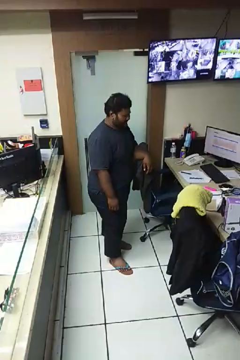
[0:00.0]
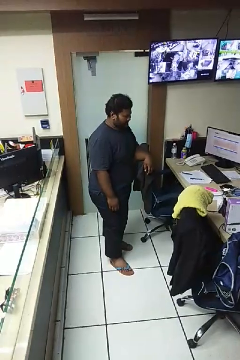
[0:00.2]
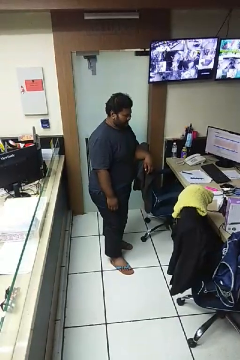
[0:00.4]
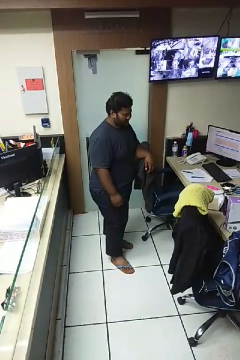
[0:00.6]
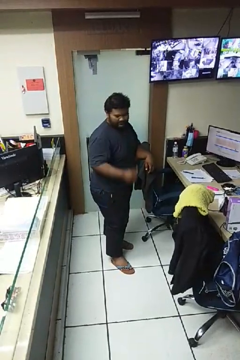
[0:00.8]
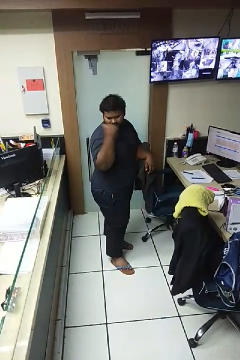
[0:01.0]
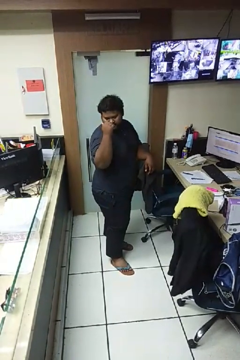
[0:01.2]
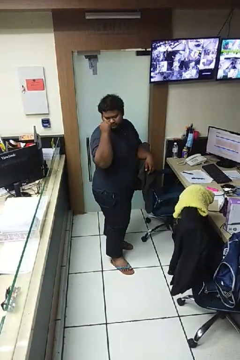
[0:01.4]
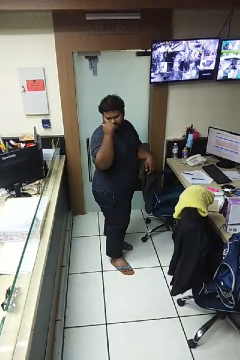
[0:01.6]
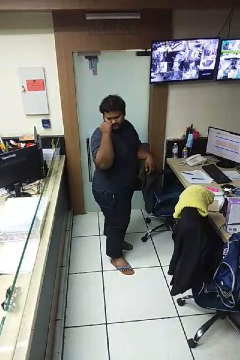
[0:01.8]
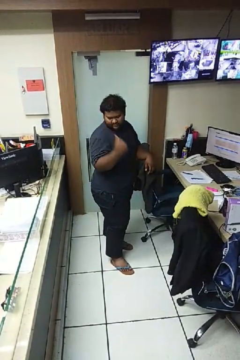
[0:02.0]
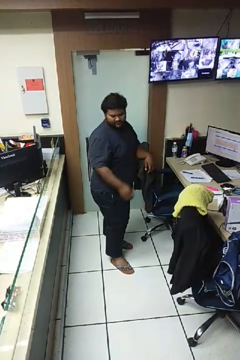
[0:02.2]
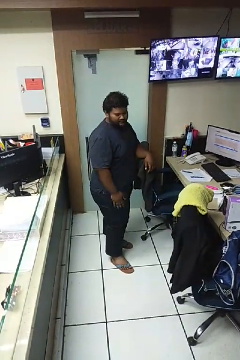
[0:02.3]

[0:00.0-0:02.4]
person gestures behind me

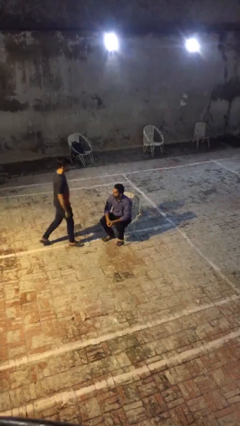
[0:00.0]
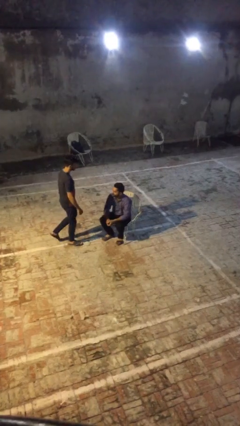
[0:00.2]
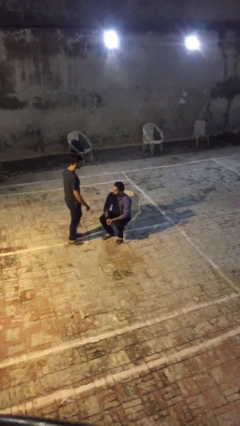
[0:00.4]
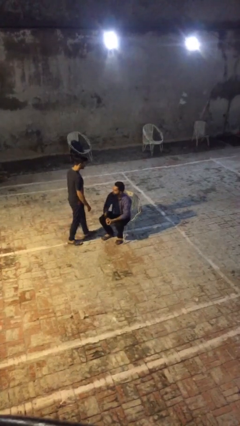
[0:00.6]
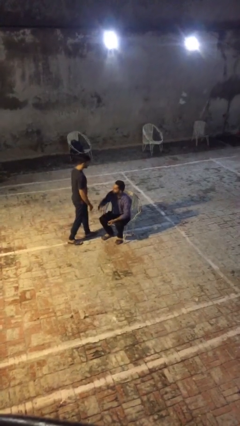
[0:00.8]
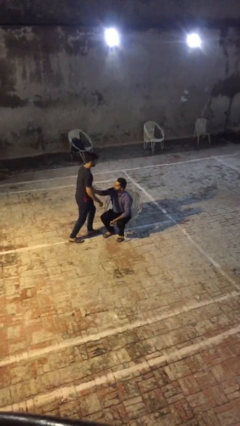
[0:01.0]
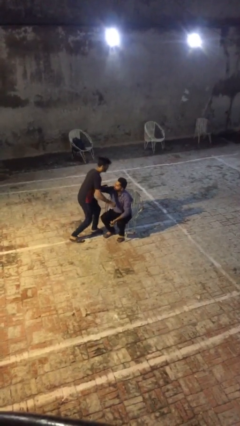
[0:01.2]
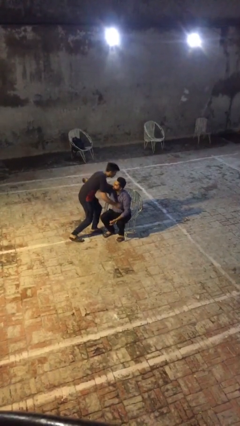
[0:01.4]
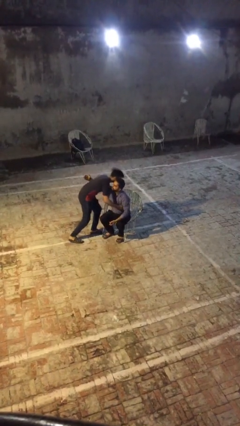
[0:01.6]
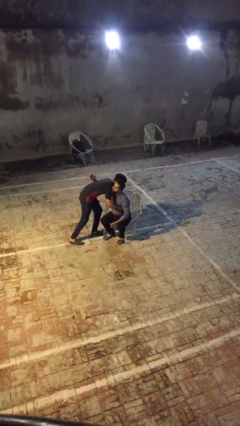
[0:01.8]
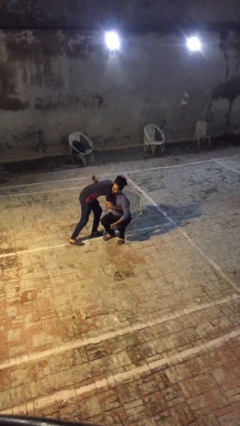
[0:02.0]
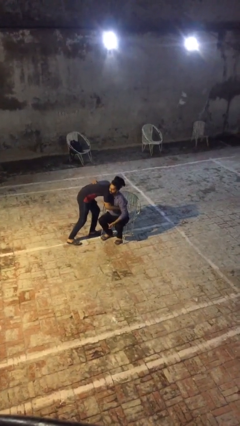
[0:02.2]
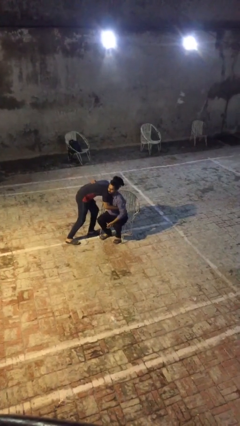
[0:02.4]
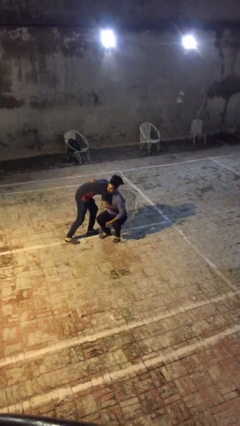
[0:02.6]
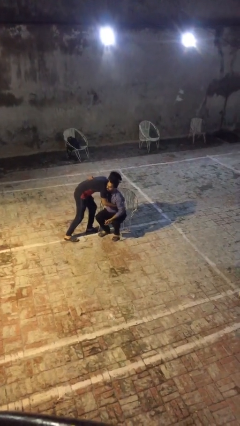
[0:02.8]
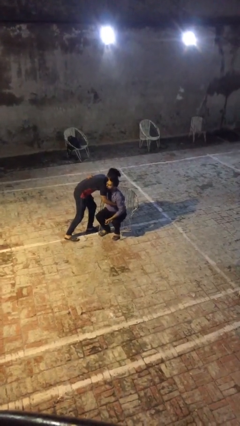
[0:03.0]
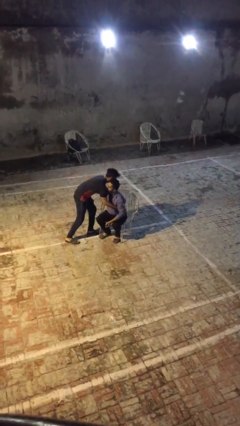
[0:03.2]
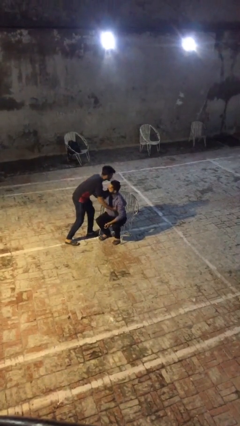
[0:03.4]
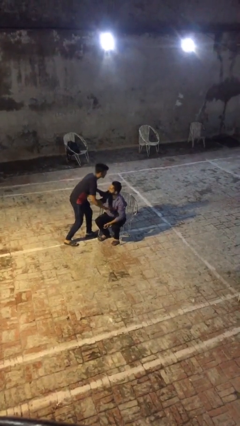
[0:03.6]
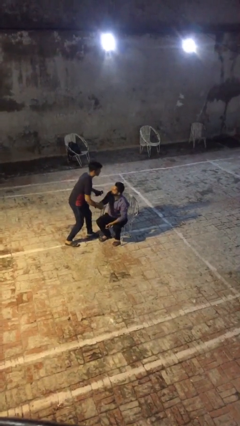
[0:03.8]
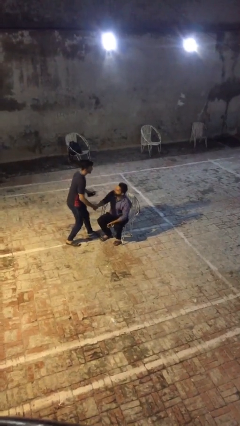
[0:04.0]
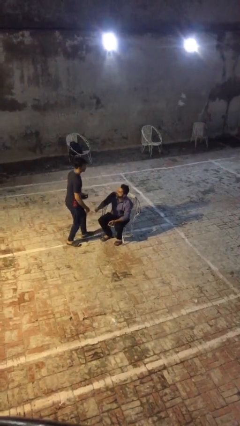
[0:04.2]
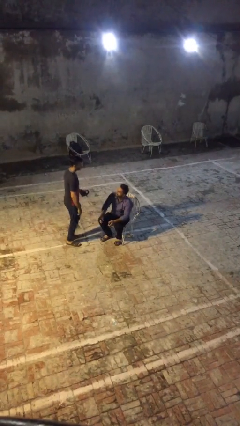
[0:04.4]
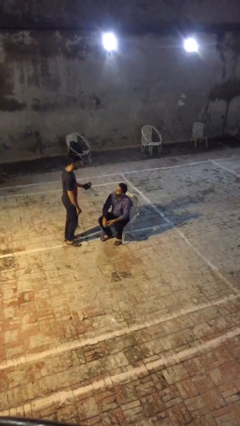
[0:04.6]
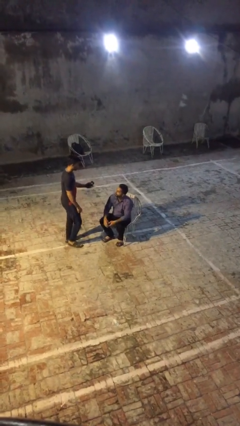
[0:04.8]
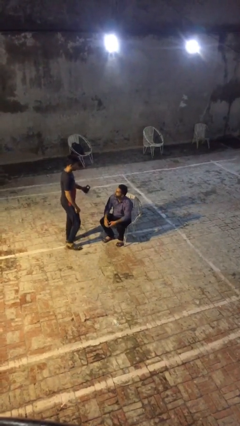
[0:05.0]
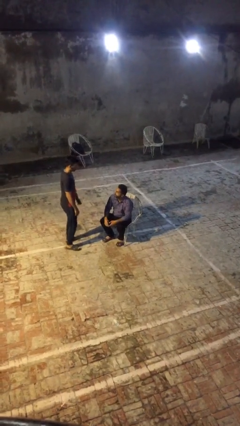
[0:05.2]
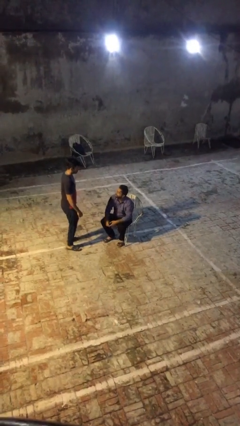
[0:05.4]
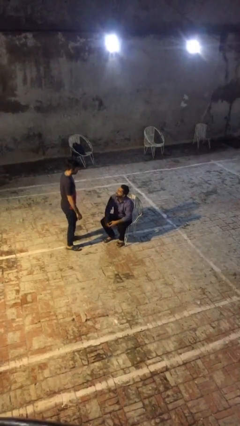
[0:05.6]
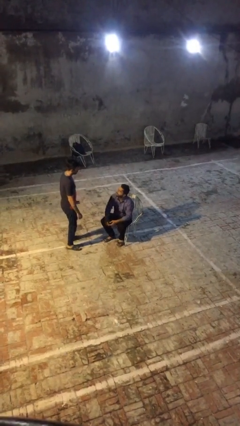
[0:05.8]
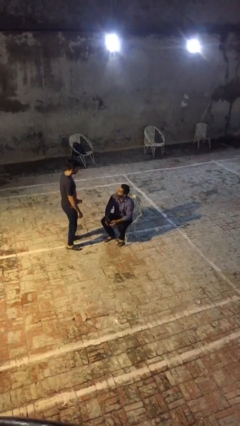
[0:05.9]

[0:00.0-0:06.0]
person embraces person

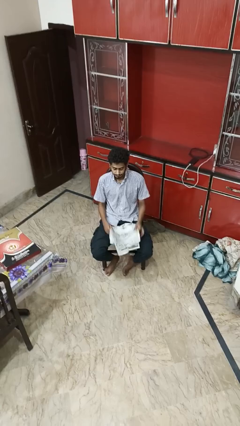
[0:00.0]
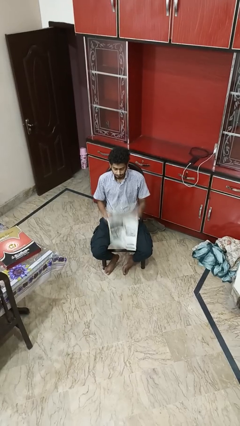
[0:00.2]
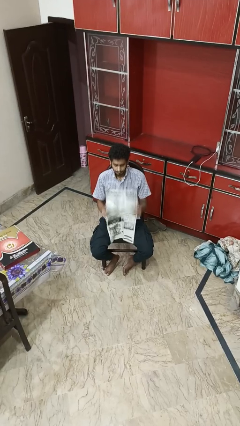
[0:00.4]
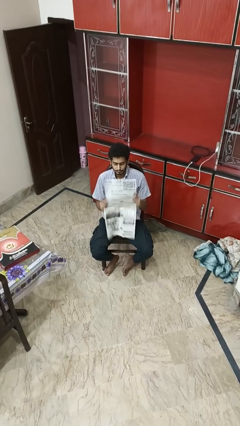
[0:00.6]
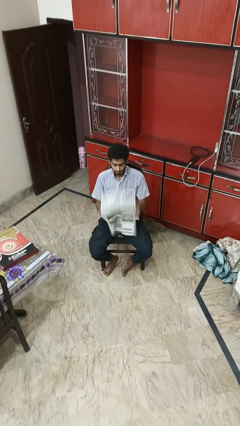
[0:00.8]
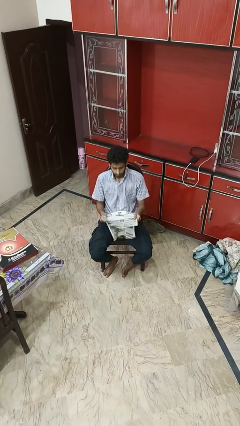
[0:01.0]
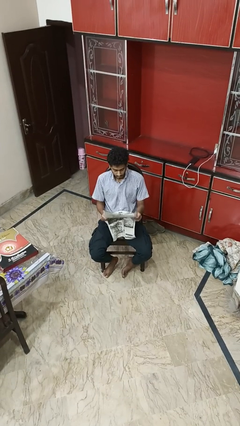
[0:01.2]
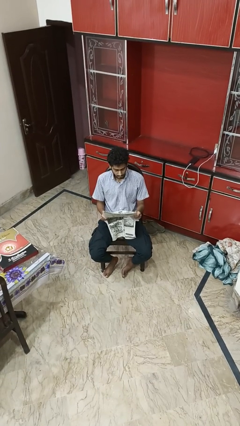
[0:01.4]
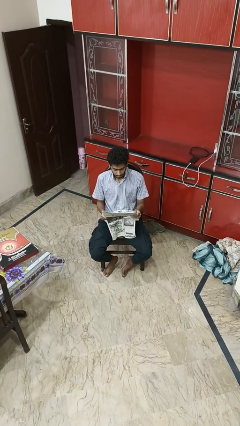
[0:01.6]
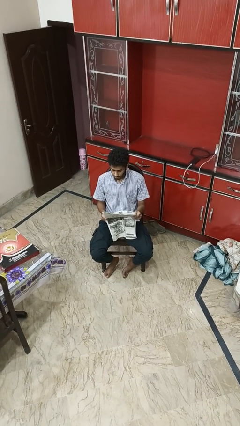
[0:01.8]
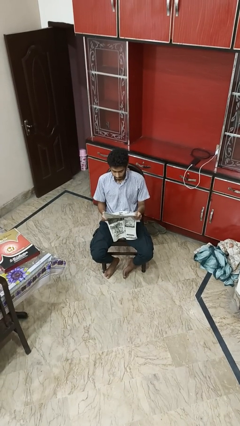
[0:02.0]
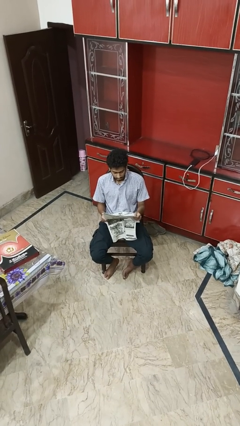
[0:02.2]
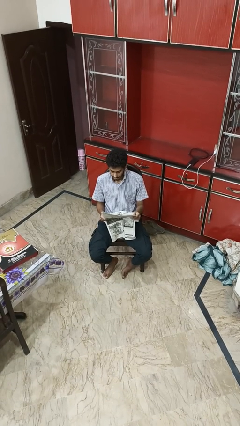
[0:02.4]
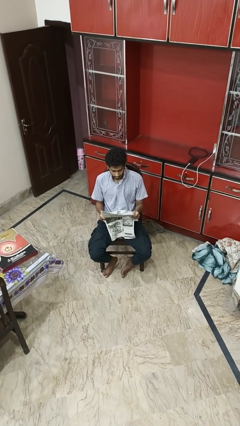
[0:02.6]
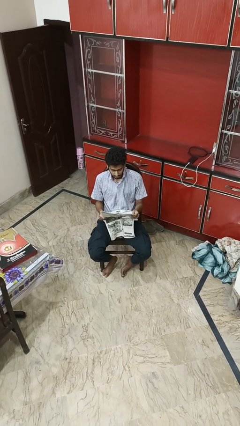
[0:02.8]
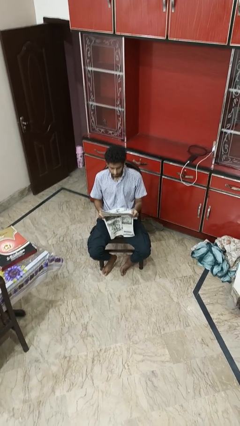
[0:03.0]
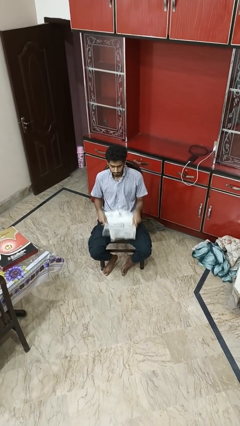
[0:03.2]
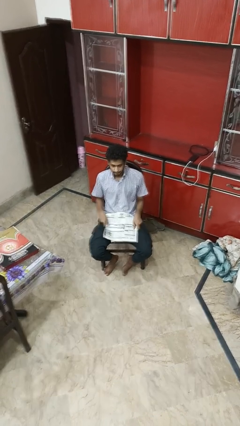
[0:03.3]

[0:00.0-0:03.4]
person reads newspaper

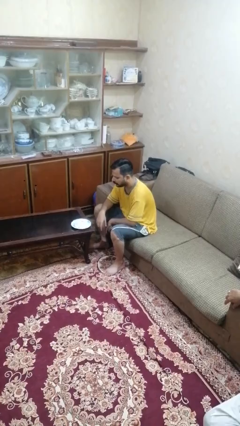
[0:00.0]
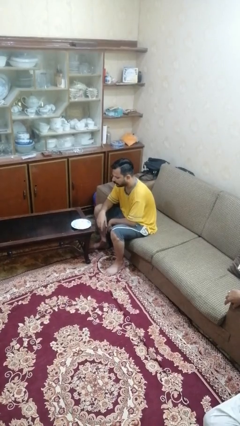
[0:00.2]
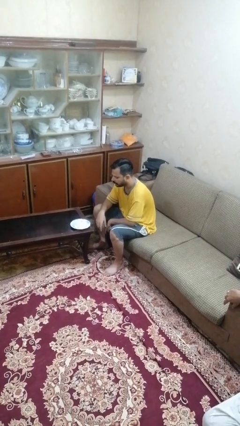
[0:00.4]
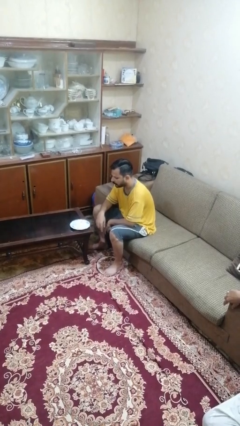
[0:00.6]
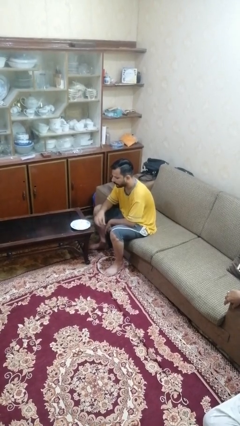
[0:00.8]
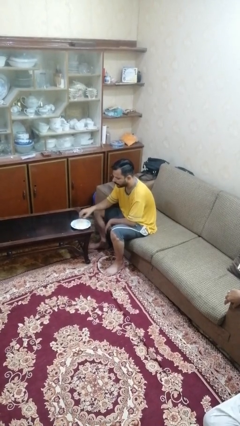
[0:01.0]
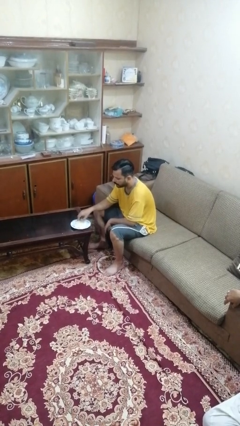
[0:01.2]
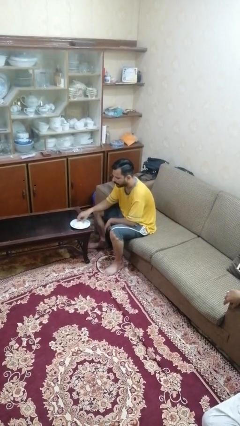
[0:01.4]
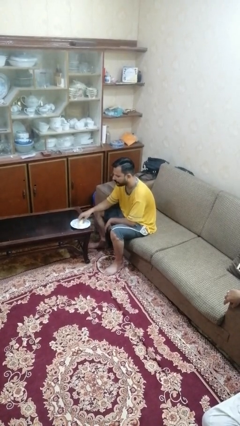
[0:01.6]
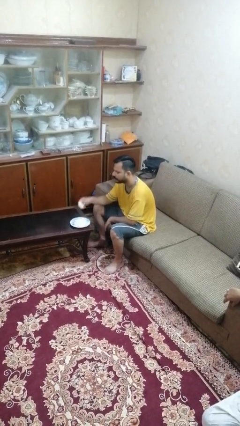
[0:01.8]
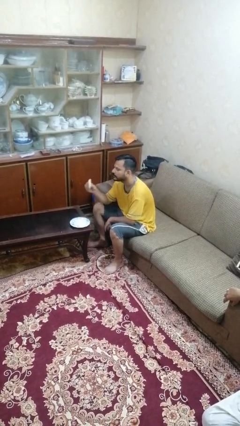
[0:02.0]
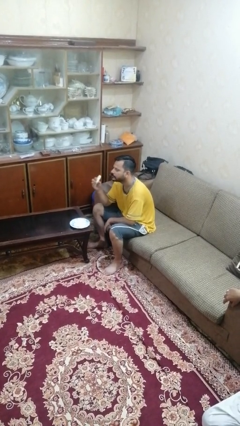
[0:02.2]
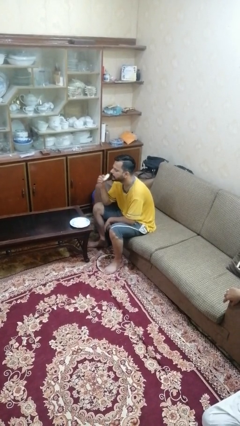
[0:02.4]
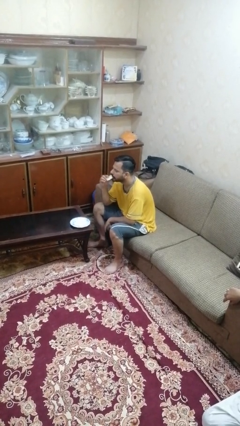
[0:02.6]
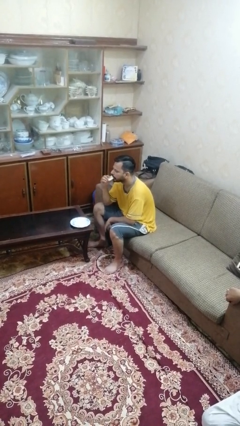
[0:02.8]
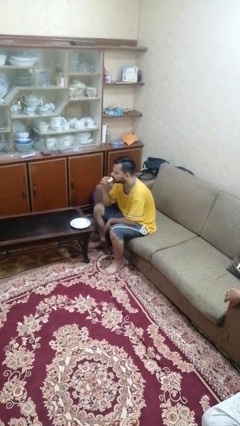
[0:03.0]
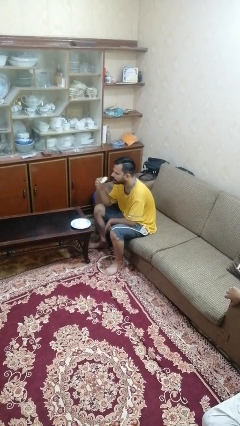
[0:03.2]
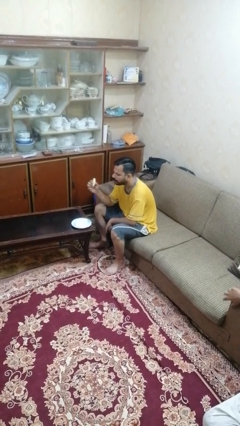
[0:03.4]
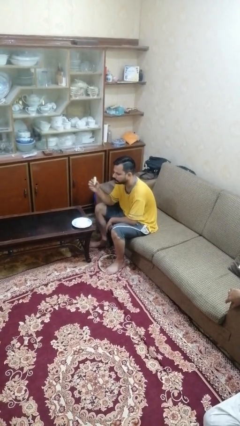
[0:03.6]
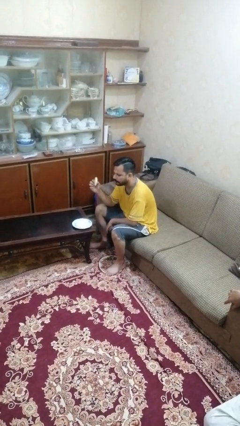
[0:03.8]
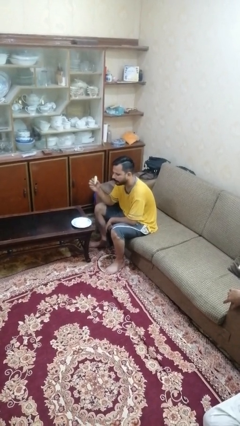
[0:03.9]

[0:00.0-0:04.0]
person eats with hands

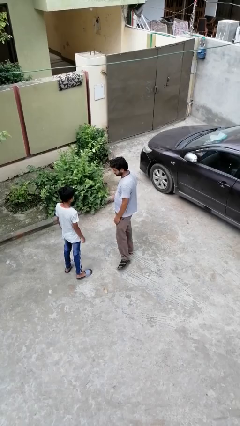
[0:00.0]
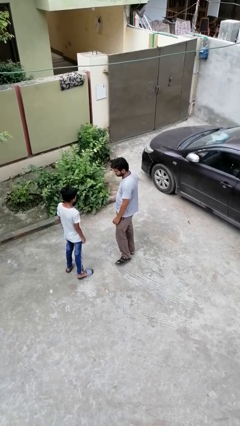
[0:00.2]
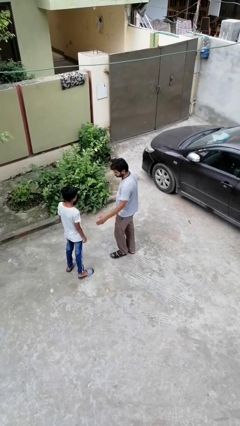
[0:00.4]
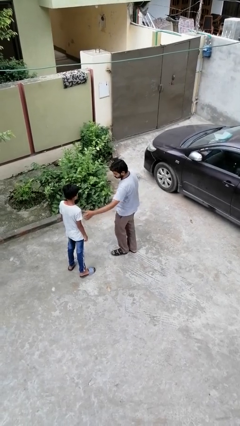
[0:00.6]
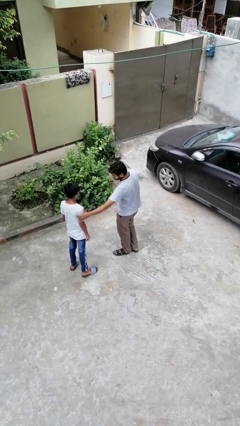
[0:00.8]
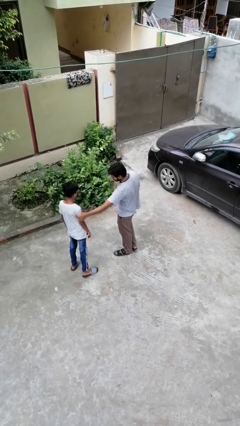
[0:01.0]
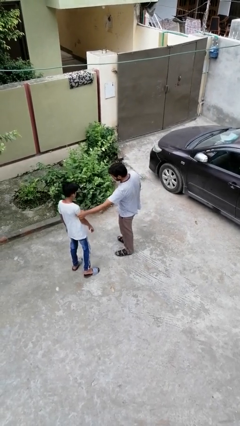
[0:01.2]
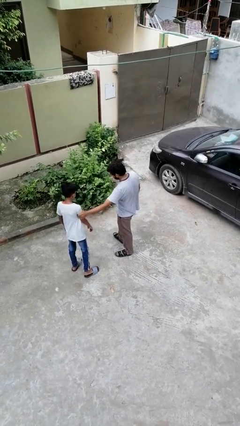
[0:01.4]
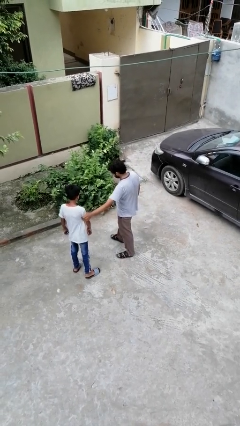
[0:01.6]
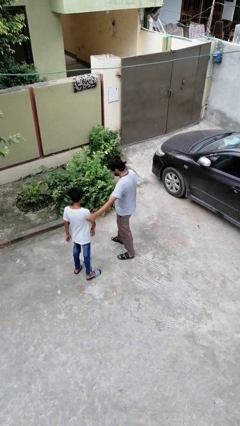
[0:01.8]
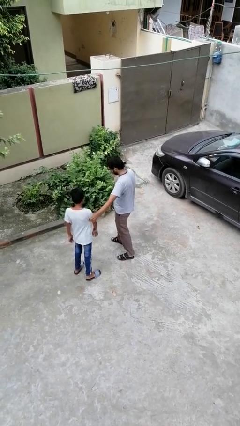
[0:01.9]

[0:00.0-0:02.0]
person grabs person by bicep

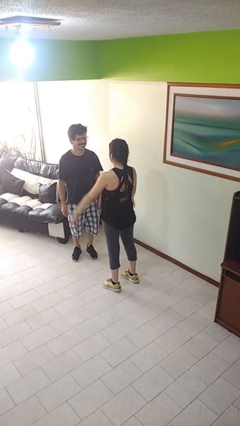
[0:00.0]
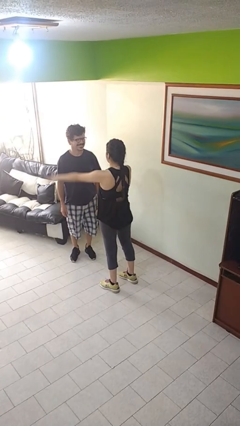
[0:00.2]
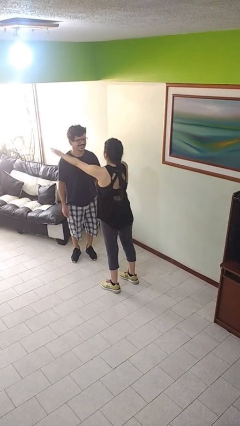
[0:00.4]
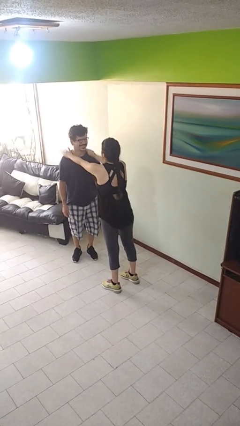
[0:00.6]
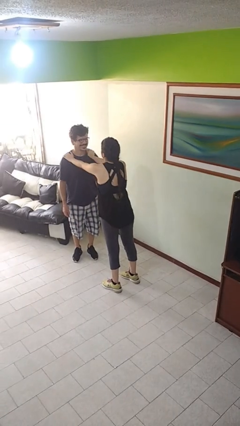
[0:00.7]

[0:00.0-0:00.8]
person grabs person by shoulder
